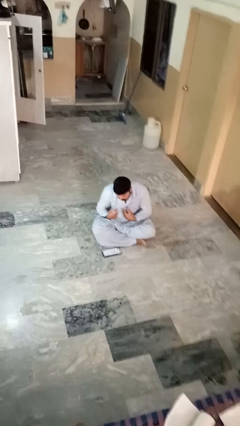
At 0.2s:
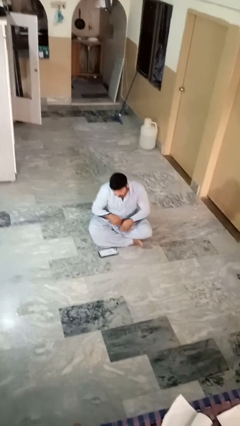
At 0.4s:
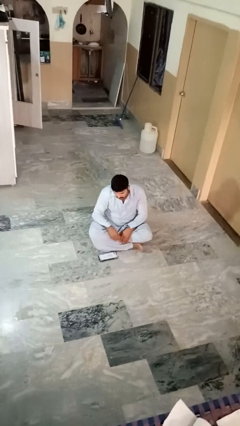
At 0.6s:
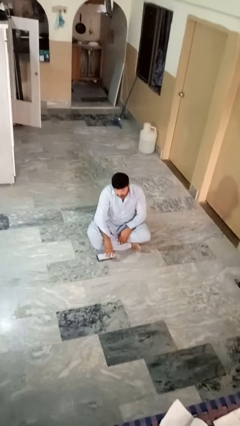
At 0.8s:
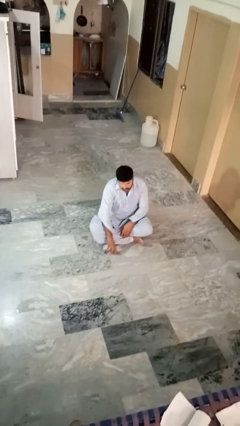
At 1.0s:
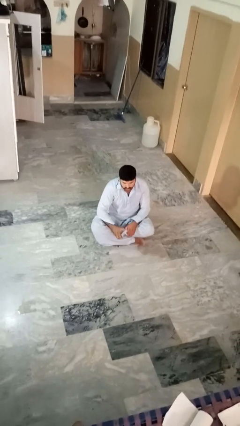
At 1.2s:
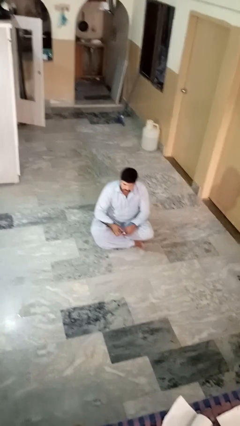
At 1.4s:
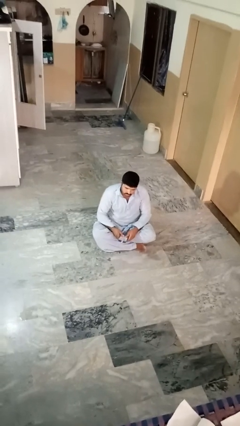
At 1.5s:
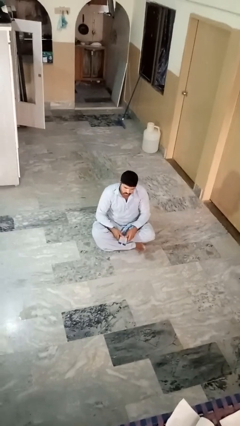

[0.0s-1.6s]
person picks up object from floor

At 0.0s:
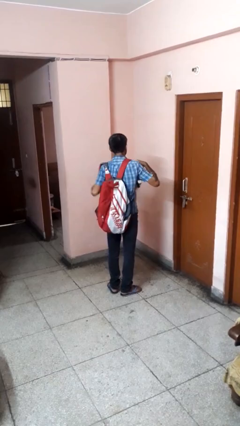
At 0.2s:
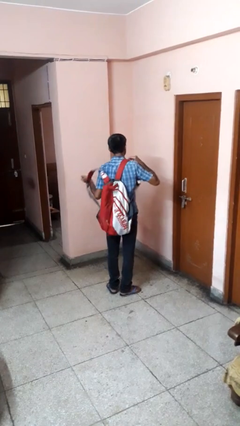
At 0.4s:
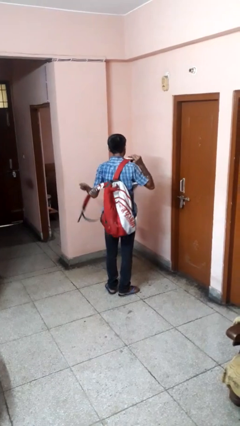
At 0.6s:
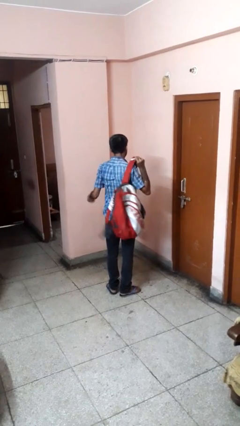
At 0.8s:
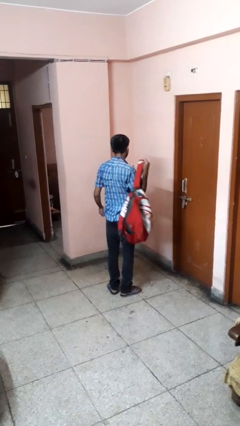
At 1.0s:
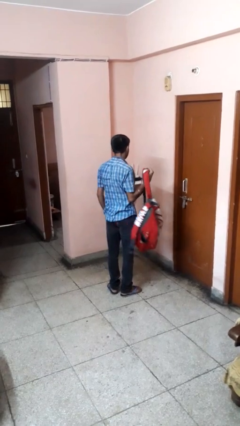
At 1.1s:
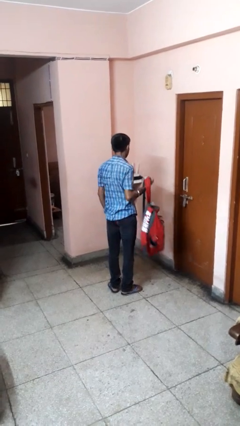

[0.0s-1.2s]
person takes off backpack

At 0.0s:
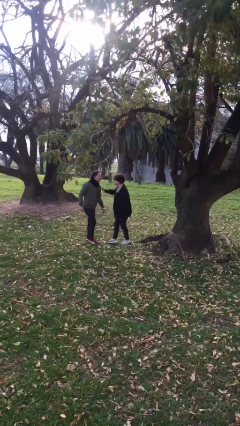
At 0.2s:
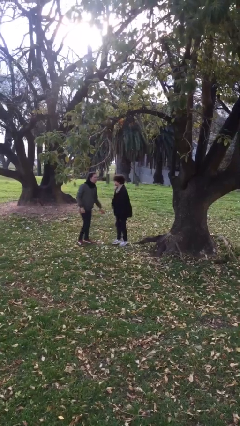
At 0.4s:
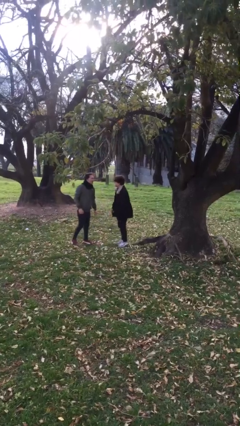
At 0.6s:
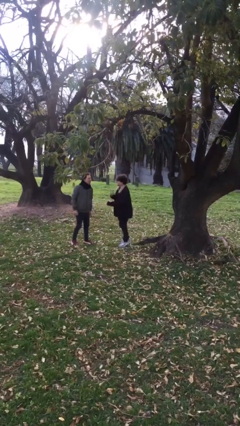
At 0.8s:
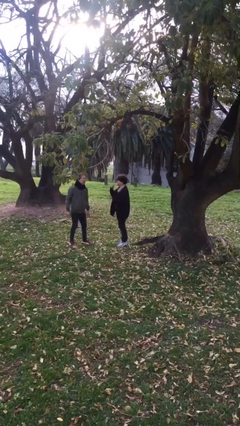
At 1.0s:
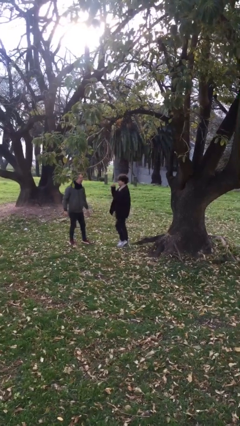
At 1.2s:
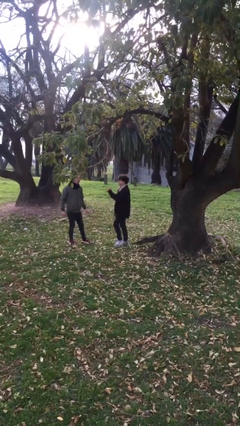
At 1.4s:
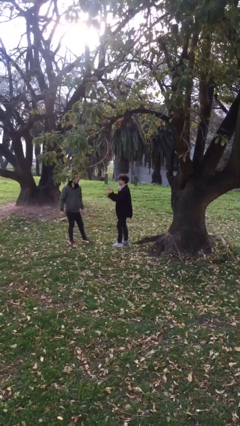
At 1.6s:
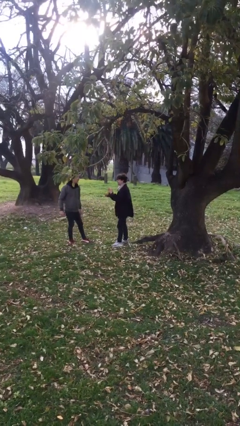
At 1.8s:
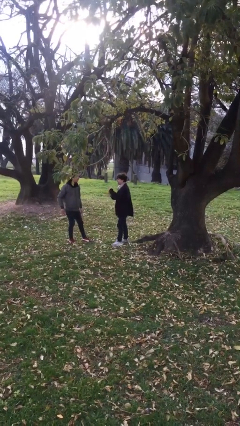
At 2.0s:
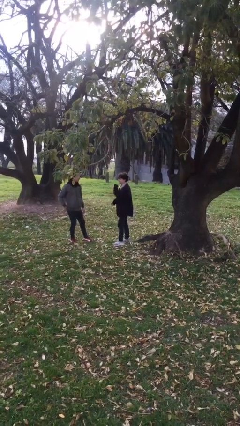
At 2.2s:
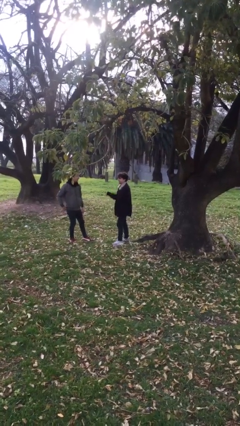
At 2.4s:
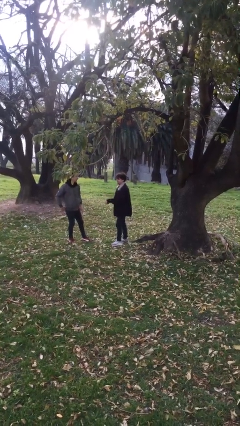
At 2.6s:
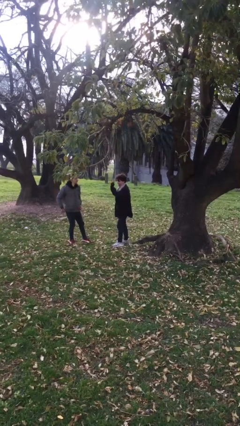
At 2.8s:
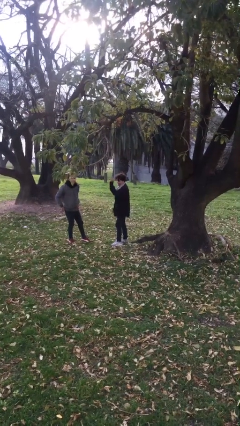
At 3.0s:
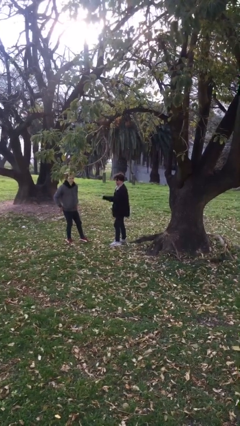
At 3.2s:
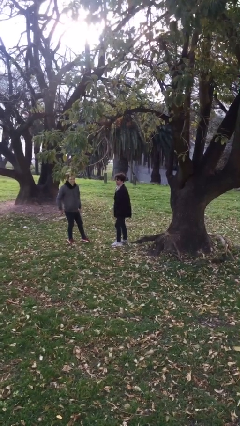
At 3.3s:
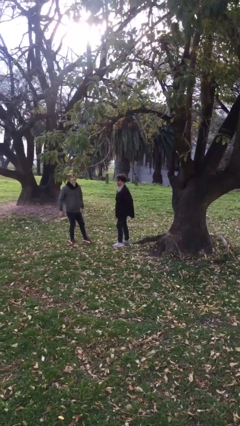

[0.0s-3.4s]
person talks to person

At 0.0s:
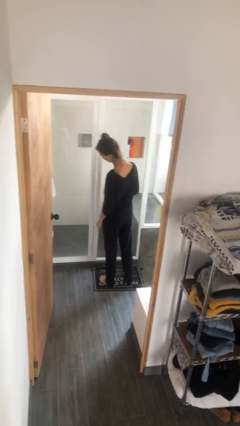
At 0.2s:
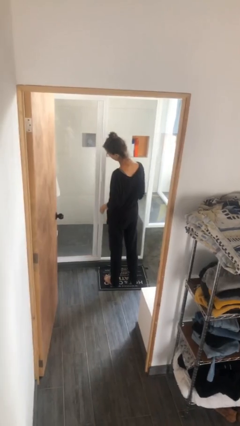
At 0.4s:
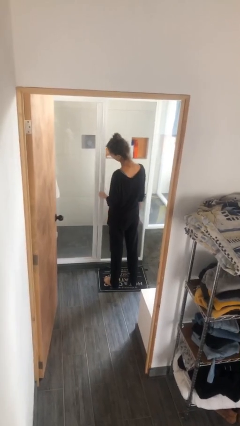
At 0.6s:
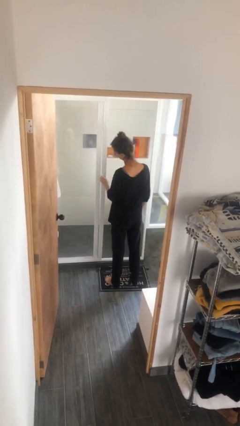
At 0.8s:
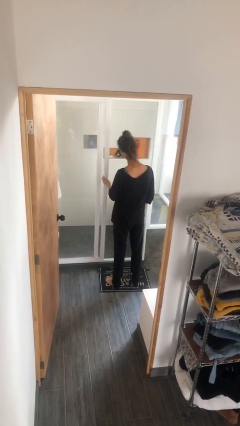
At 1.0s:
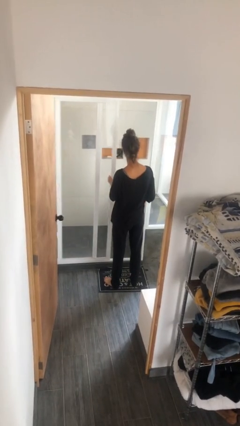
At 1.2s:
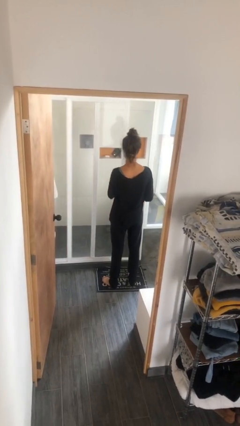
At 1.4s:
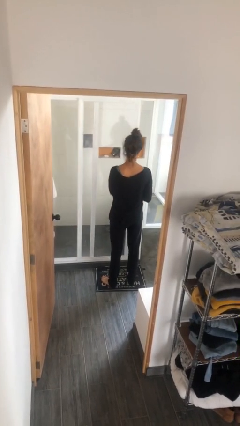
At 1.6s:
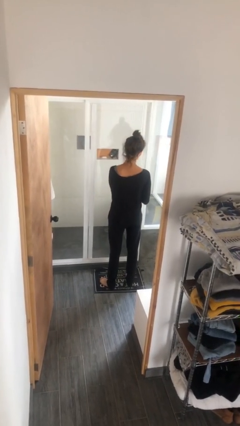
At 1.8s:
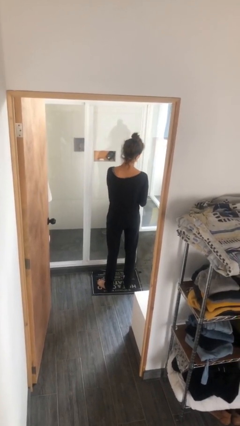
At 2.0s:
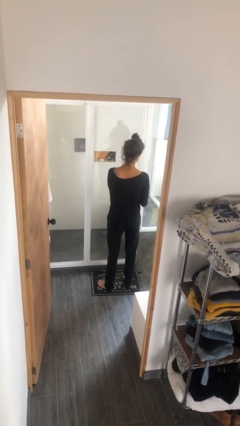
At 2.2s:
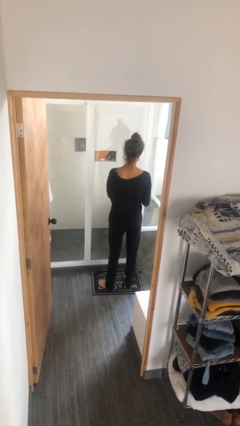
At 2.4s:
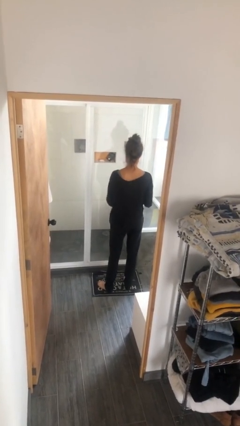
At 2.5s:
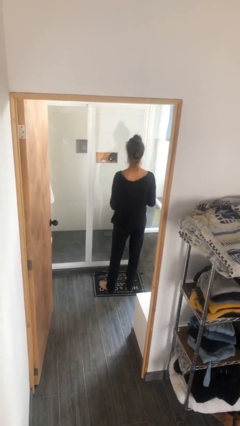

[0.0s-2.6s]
person closes sliding door

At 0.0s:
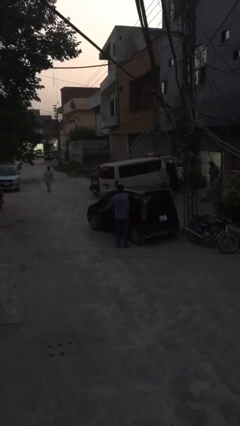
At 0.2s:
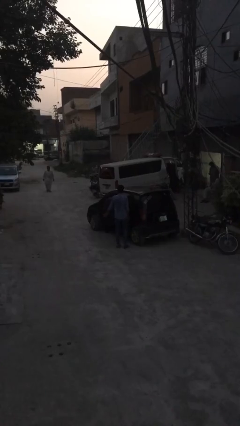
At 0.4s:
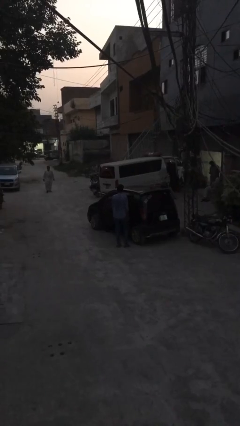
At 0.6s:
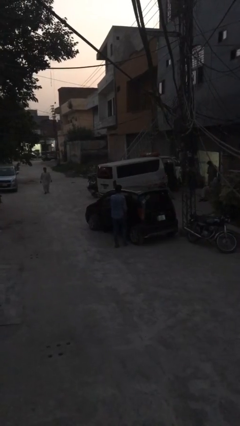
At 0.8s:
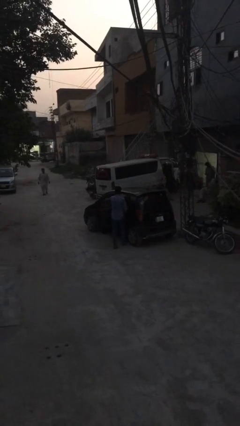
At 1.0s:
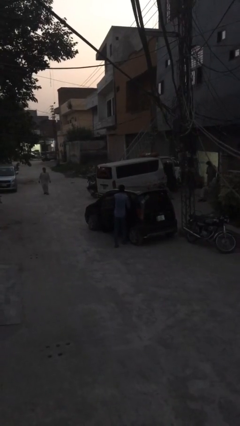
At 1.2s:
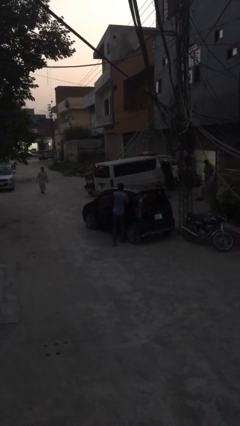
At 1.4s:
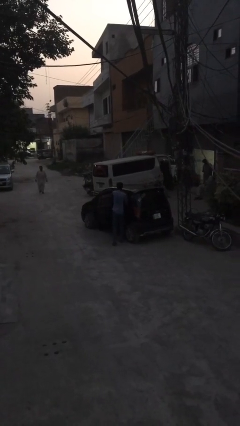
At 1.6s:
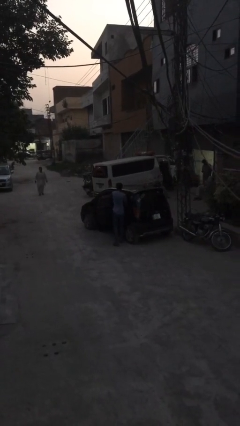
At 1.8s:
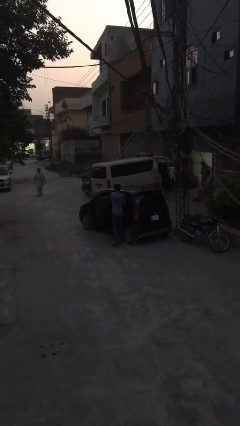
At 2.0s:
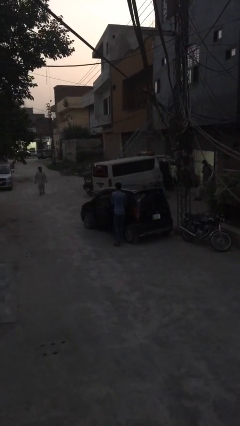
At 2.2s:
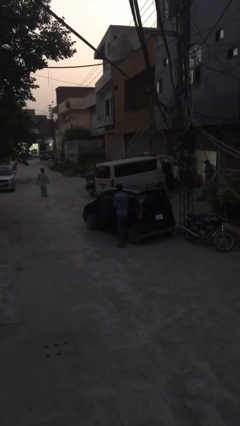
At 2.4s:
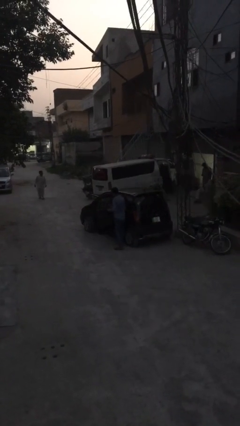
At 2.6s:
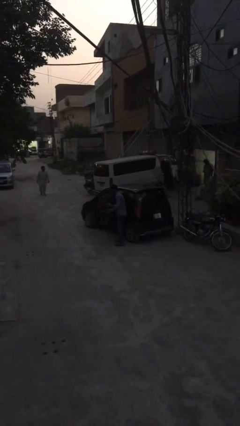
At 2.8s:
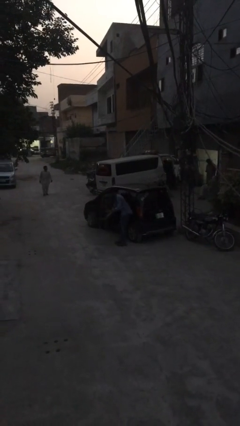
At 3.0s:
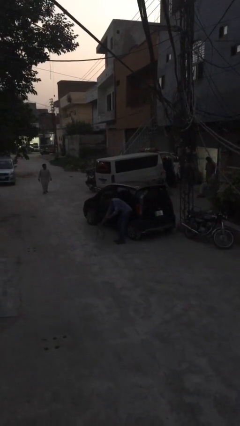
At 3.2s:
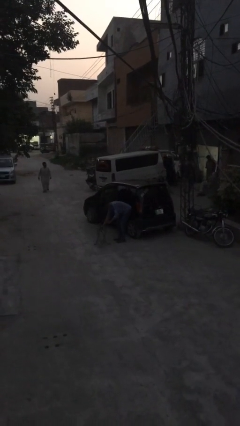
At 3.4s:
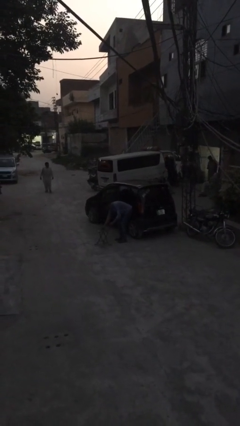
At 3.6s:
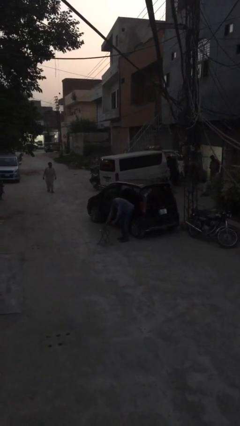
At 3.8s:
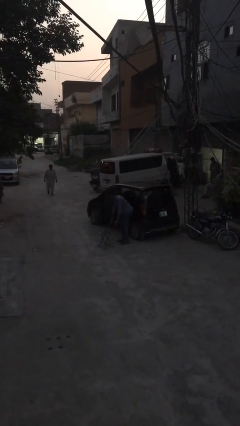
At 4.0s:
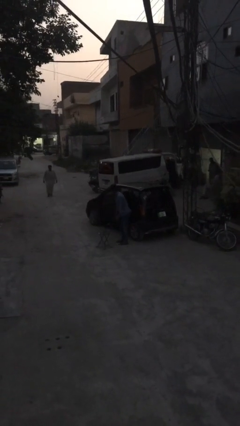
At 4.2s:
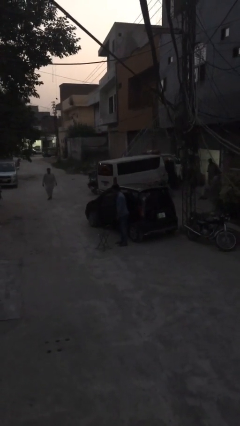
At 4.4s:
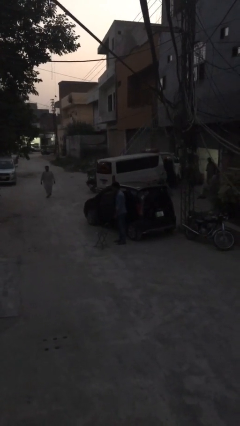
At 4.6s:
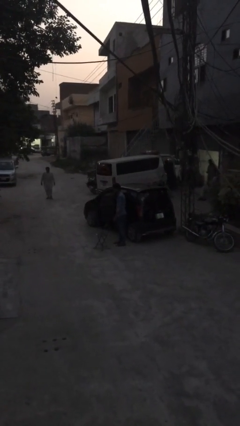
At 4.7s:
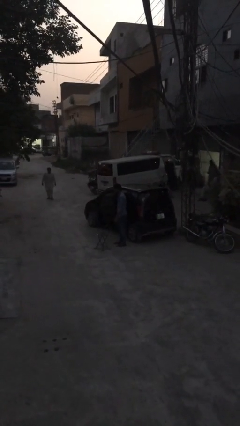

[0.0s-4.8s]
person unloads car

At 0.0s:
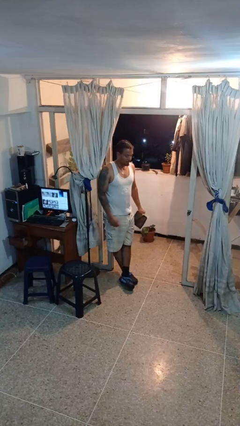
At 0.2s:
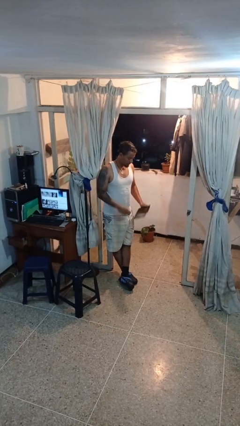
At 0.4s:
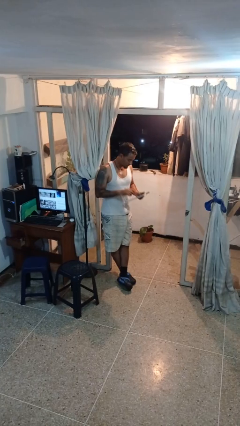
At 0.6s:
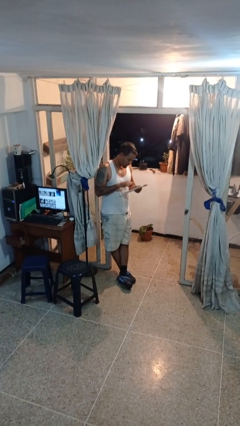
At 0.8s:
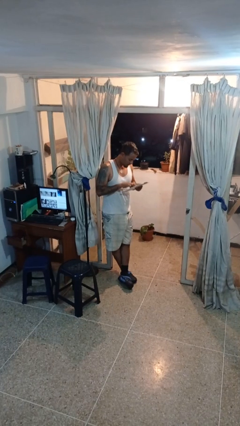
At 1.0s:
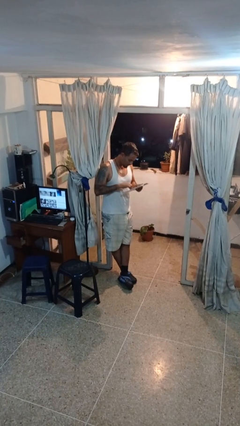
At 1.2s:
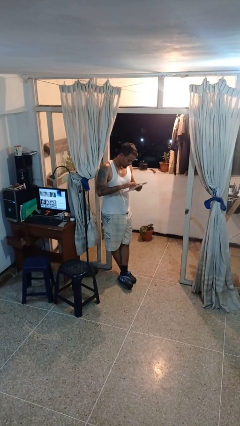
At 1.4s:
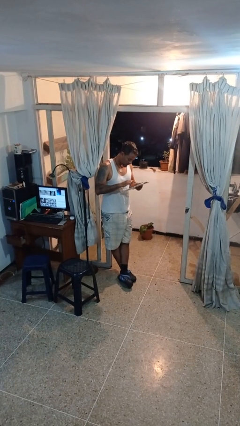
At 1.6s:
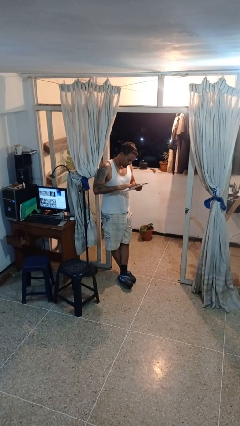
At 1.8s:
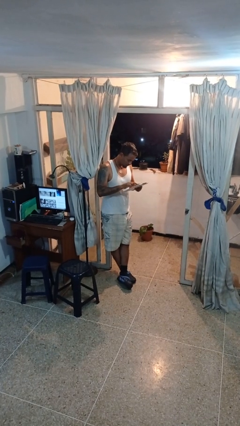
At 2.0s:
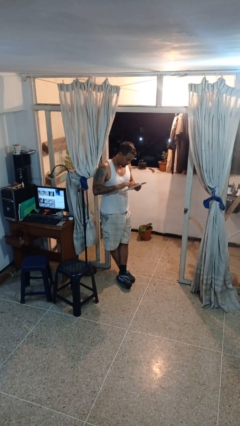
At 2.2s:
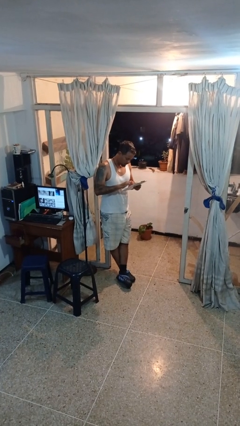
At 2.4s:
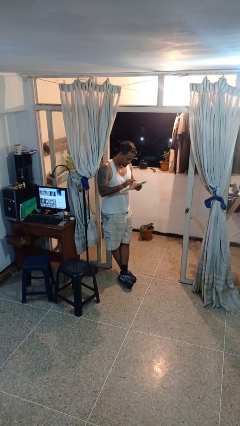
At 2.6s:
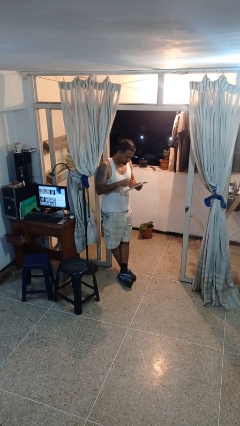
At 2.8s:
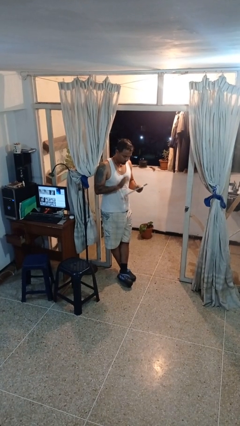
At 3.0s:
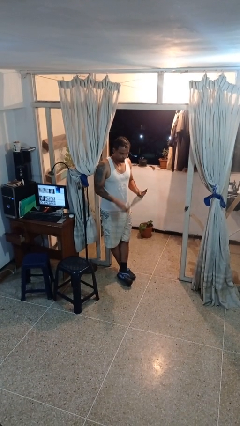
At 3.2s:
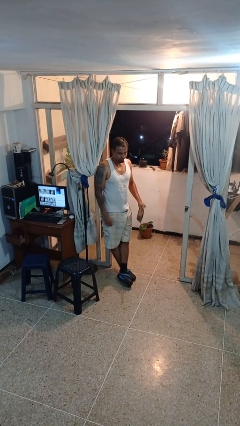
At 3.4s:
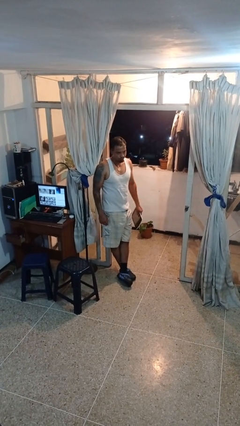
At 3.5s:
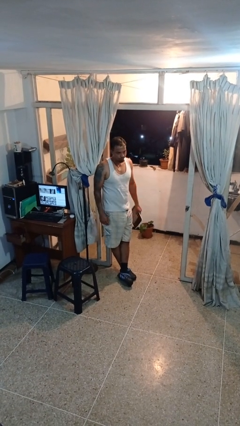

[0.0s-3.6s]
person interacts with tablet

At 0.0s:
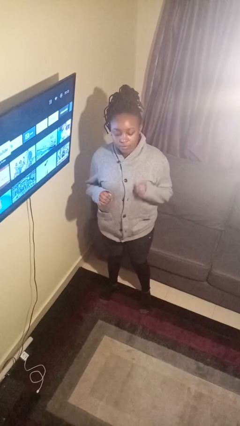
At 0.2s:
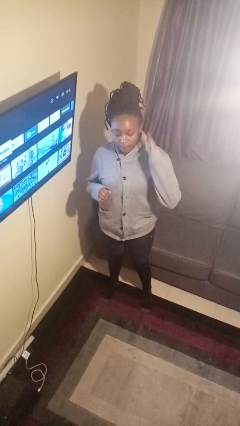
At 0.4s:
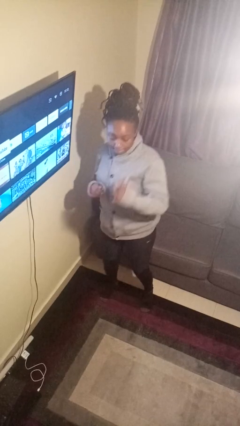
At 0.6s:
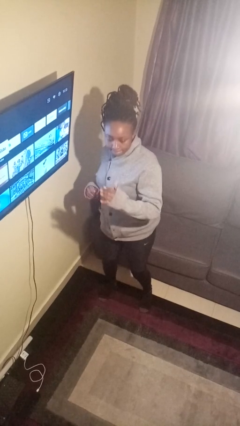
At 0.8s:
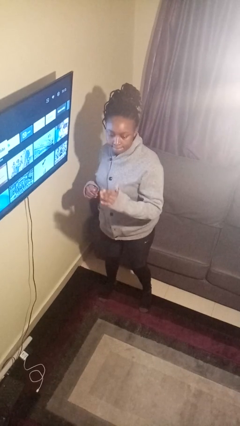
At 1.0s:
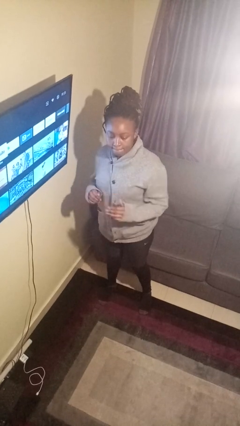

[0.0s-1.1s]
person karate chop
